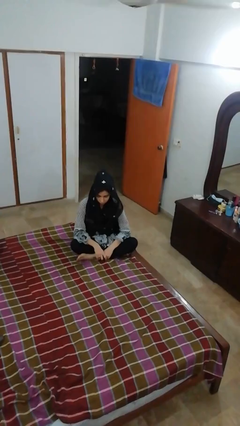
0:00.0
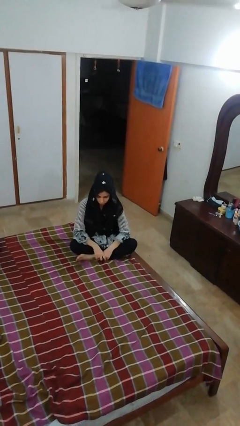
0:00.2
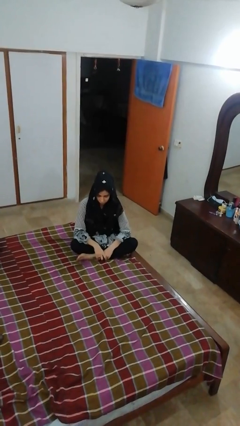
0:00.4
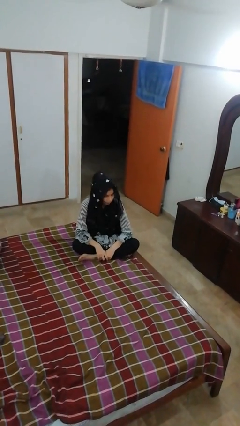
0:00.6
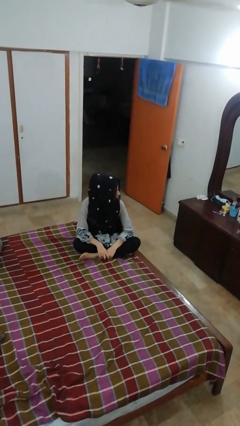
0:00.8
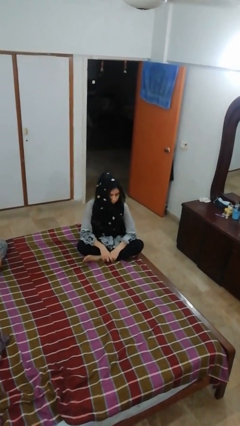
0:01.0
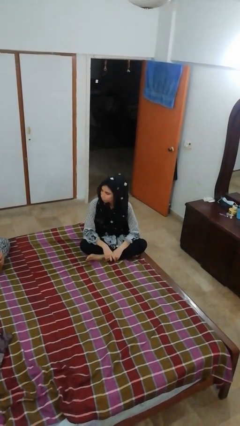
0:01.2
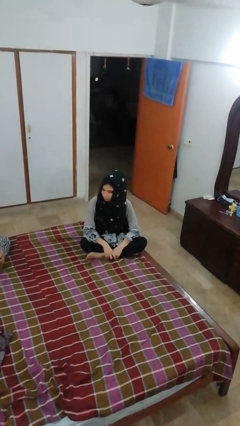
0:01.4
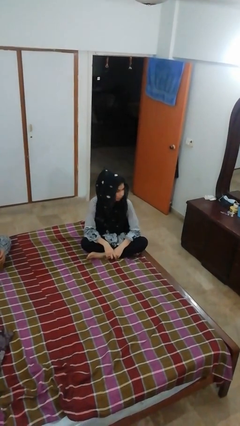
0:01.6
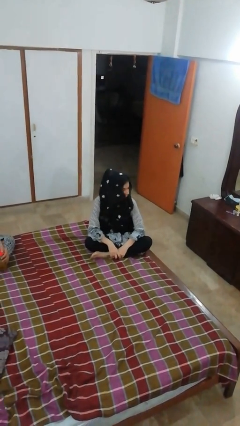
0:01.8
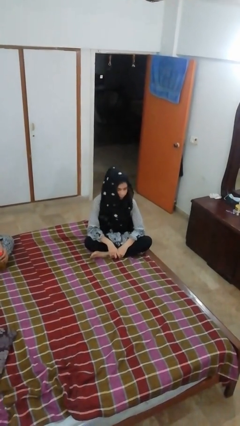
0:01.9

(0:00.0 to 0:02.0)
person shakes head

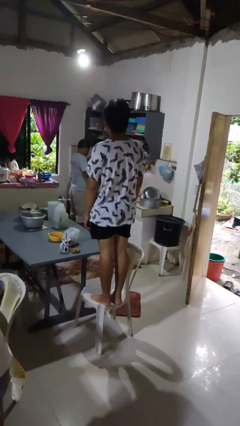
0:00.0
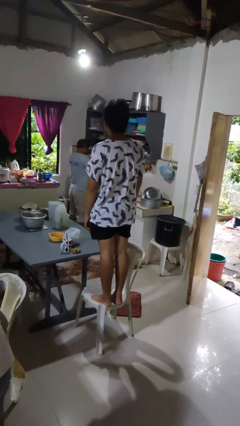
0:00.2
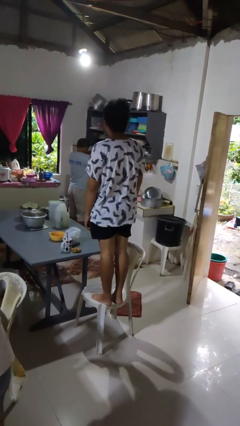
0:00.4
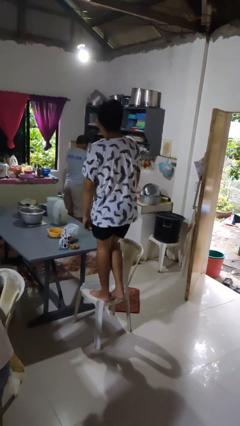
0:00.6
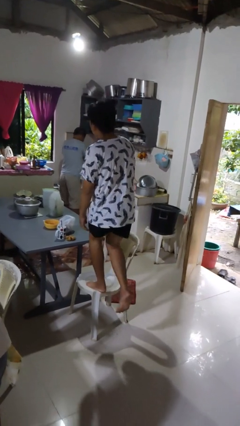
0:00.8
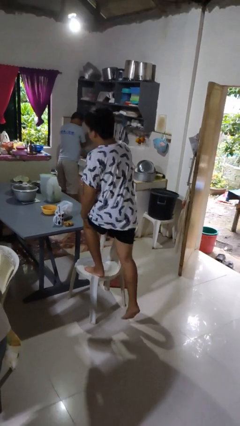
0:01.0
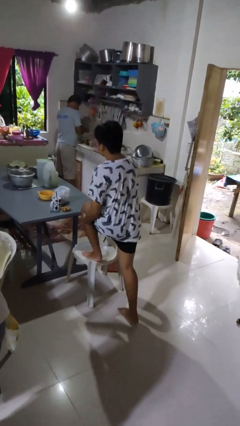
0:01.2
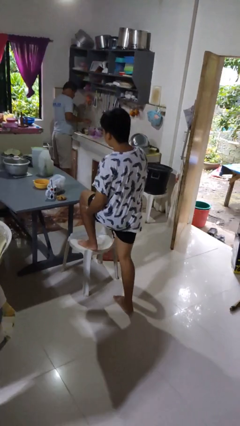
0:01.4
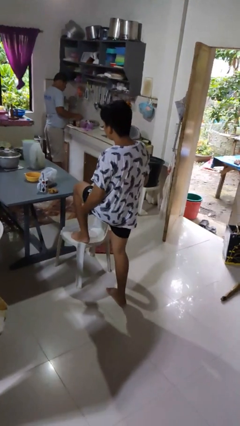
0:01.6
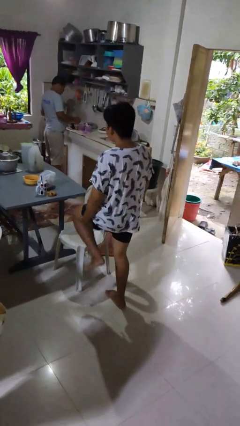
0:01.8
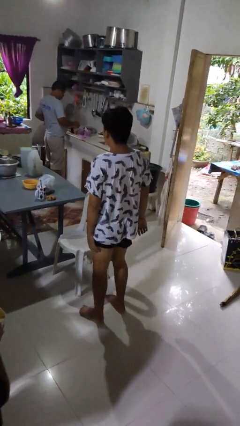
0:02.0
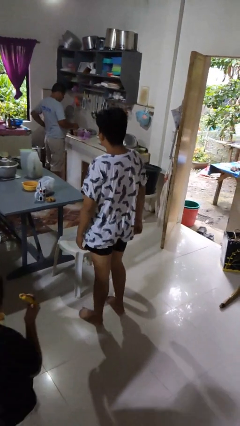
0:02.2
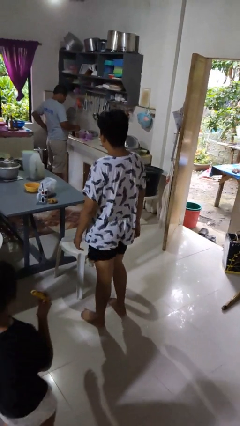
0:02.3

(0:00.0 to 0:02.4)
person climbs off chair

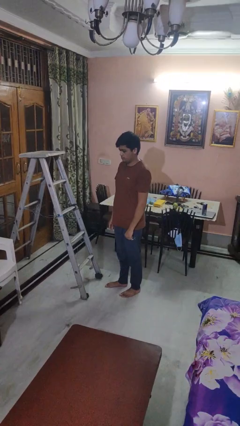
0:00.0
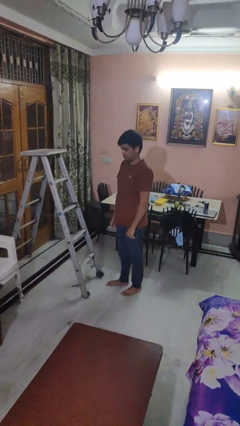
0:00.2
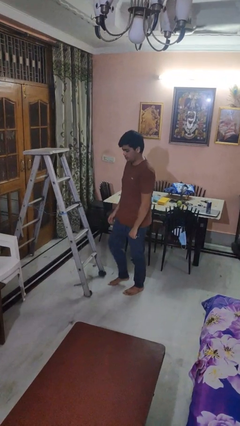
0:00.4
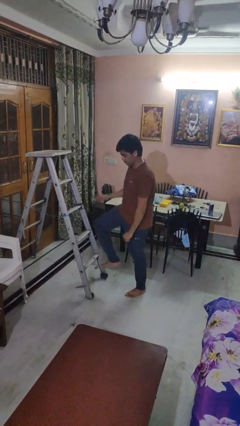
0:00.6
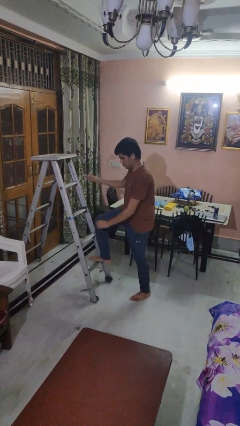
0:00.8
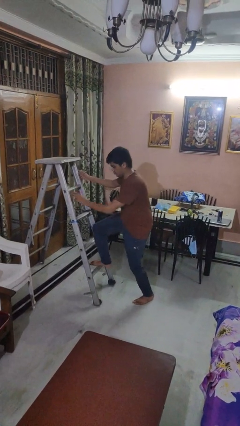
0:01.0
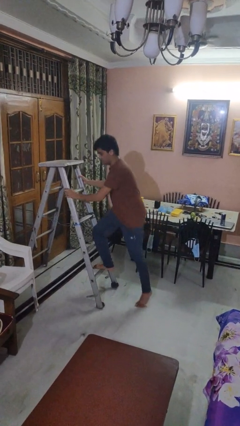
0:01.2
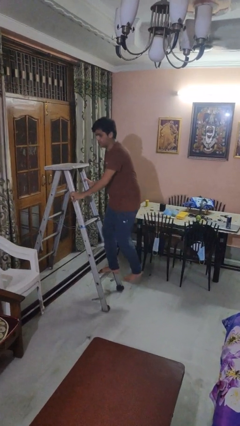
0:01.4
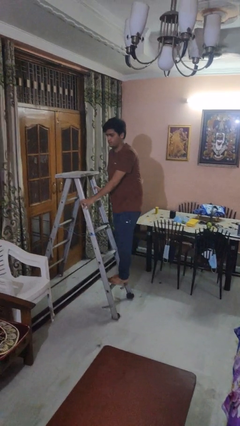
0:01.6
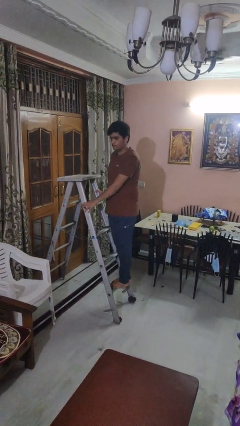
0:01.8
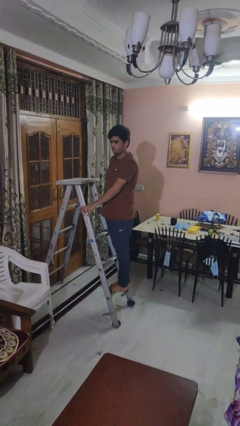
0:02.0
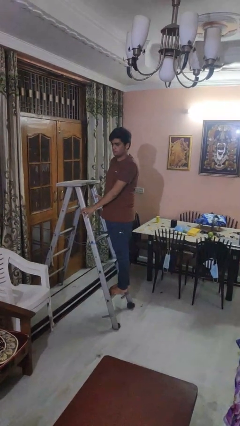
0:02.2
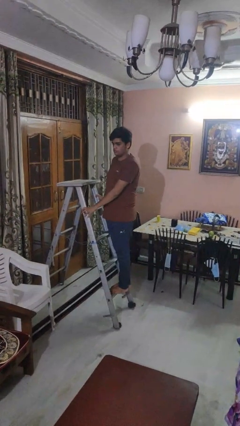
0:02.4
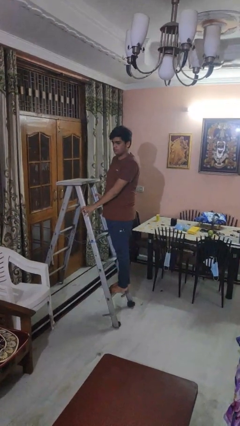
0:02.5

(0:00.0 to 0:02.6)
person climbs up ladder

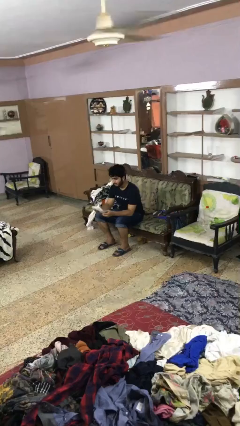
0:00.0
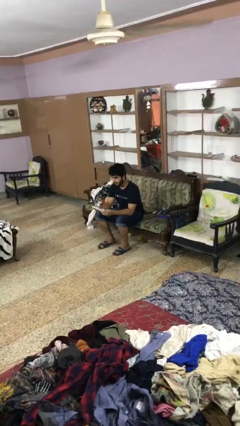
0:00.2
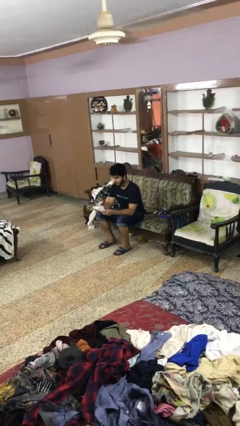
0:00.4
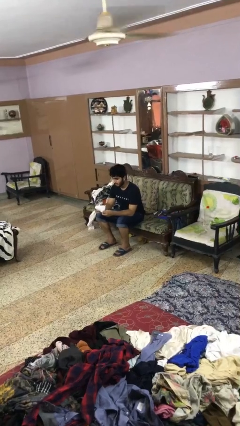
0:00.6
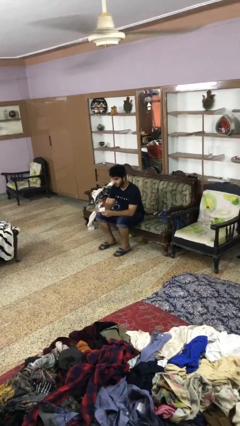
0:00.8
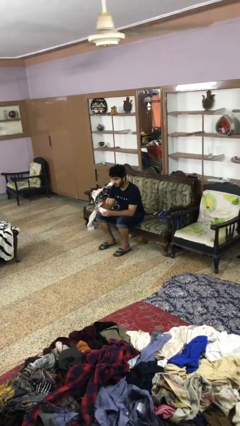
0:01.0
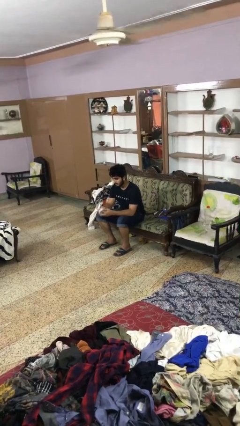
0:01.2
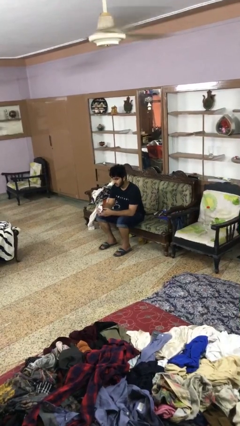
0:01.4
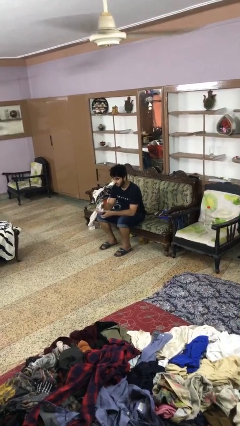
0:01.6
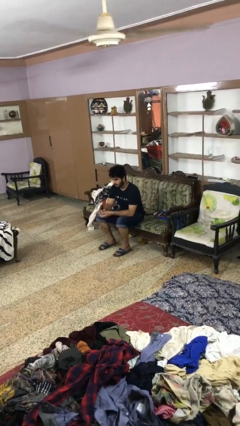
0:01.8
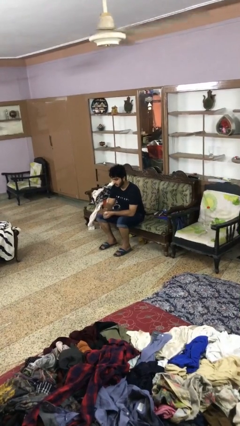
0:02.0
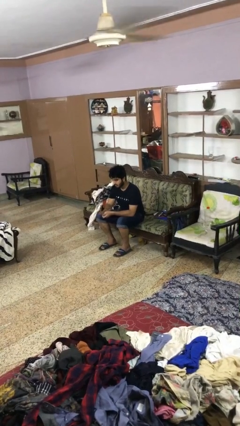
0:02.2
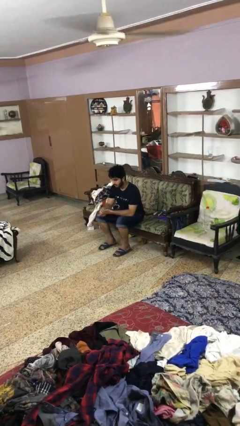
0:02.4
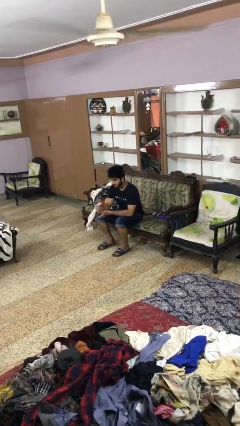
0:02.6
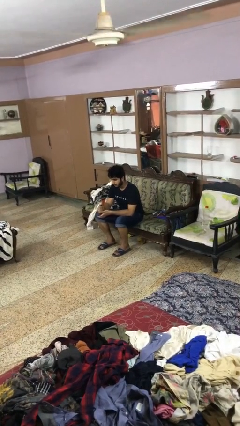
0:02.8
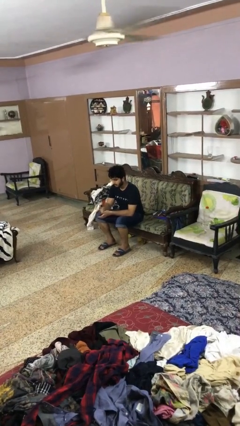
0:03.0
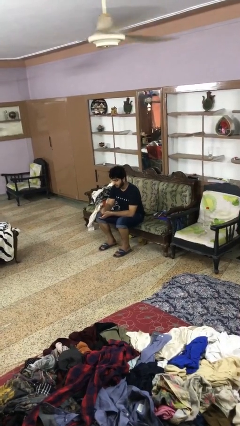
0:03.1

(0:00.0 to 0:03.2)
person crumples paper

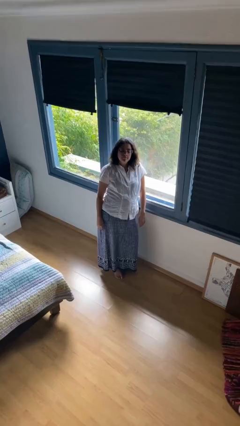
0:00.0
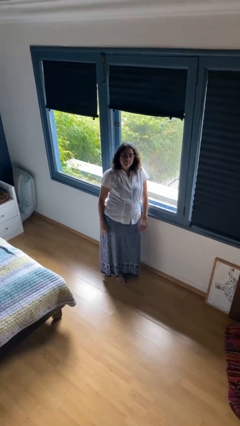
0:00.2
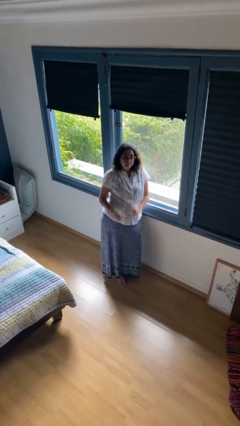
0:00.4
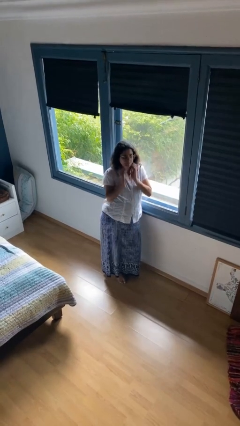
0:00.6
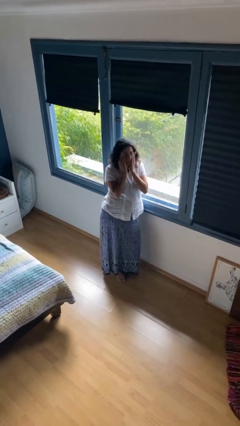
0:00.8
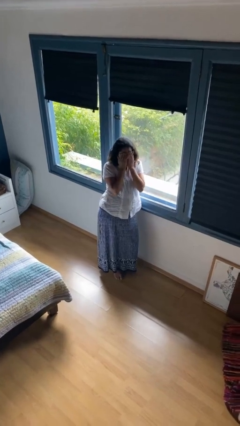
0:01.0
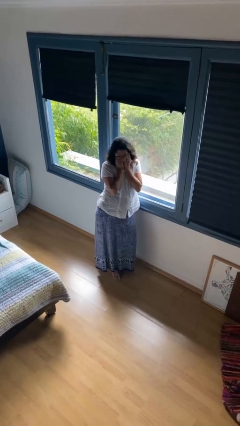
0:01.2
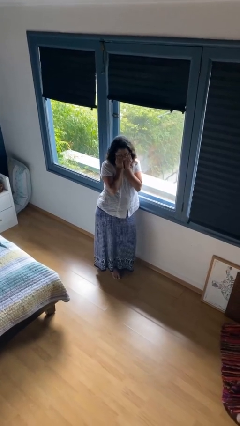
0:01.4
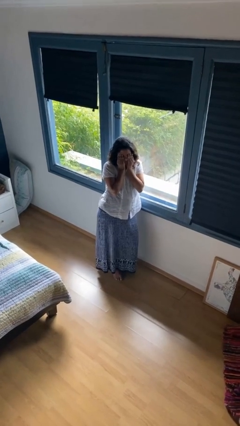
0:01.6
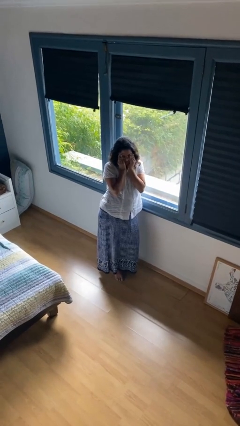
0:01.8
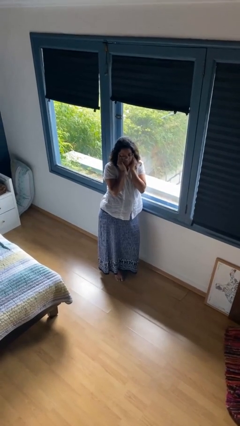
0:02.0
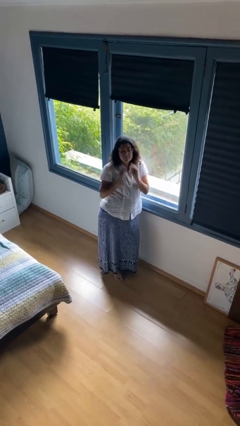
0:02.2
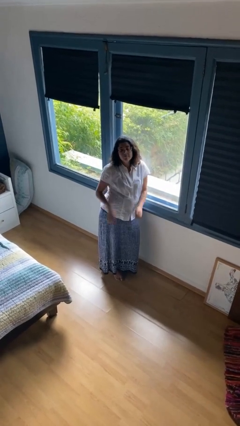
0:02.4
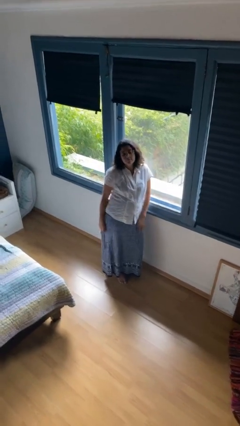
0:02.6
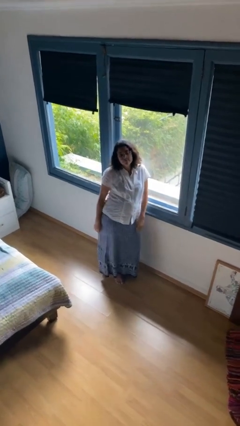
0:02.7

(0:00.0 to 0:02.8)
person rubs eyes

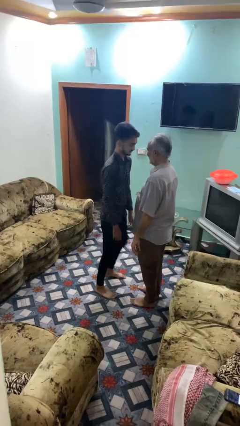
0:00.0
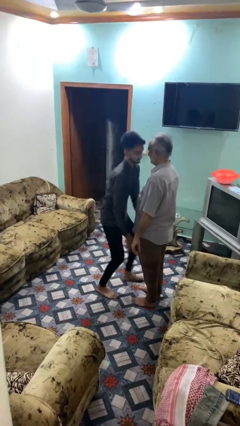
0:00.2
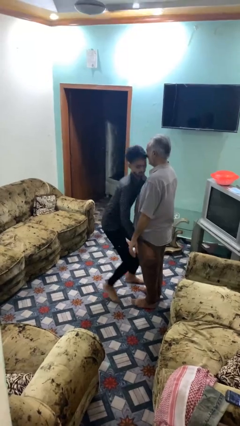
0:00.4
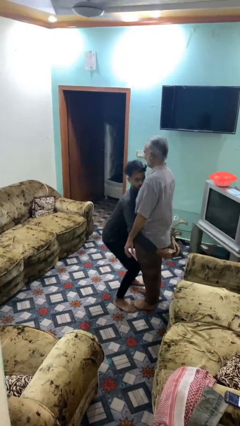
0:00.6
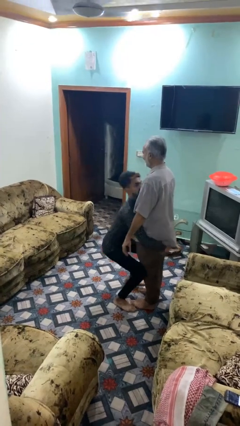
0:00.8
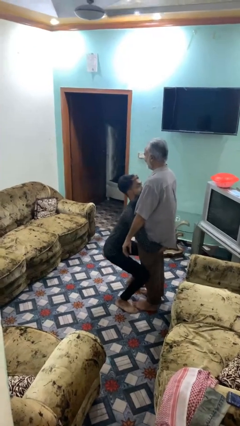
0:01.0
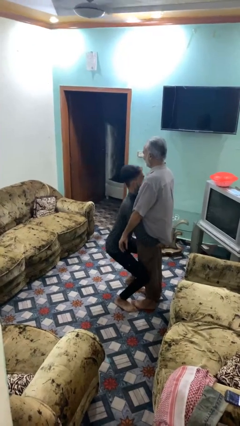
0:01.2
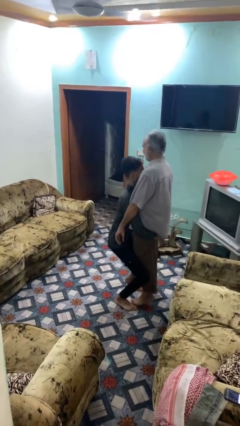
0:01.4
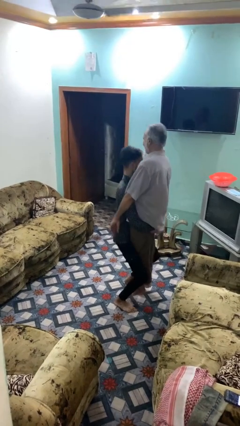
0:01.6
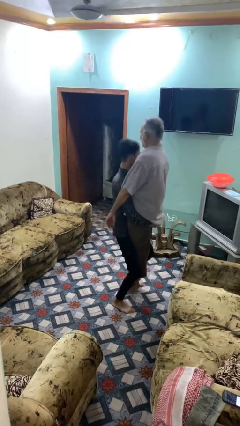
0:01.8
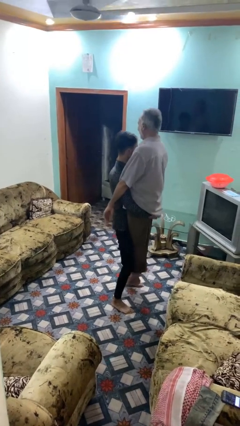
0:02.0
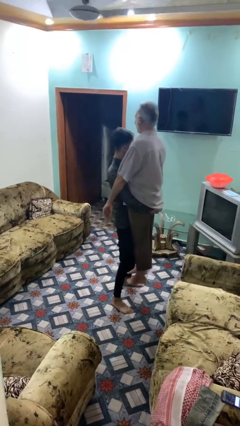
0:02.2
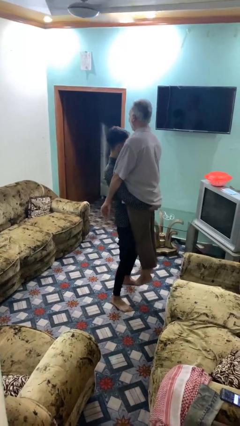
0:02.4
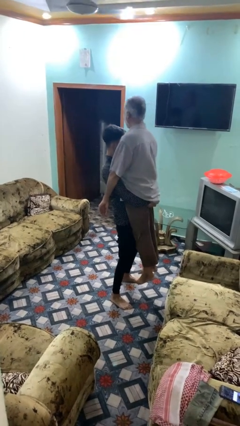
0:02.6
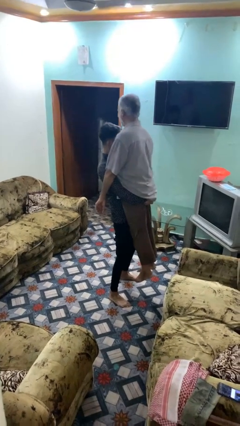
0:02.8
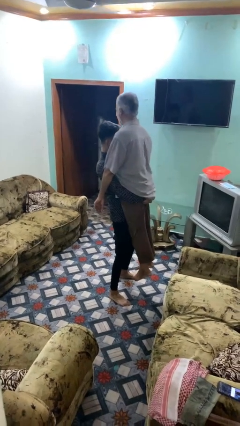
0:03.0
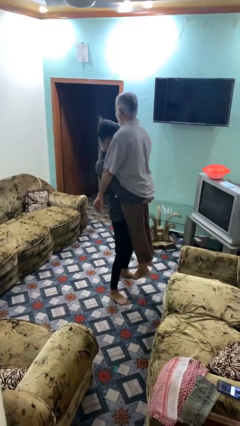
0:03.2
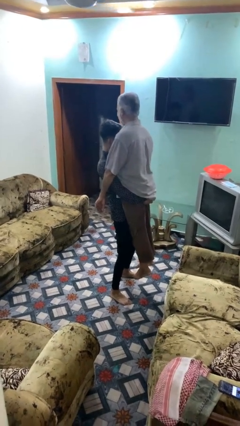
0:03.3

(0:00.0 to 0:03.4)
person picks up person

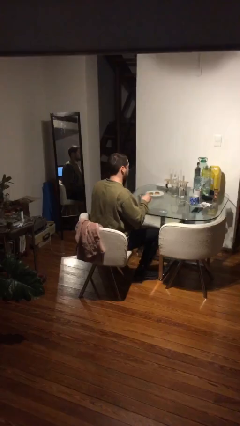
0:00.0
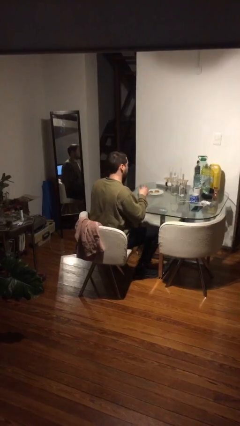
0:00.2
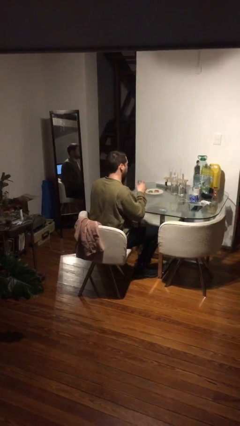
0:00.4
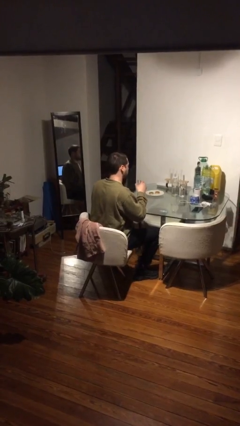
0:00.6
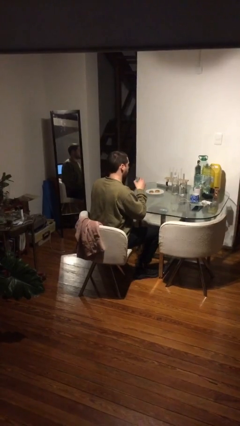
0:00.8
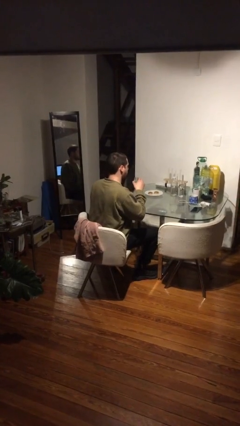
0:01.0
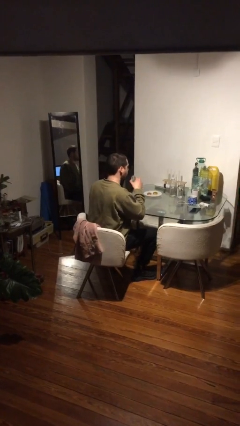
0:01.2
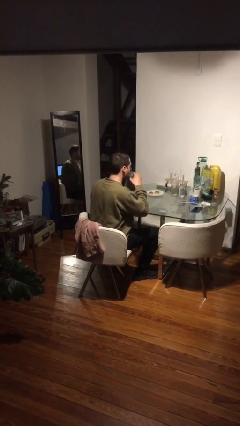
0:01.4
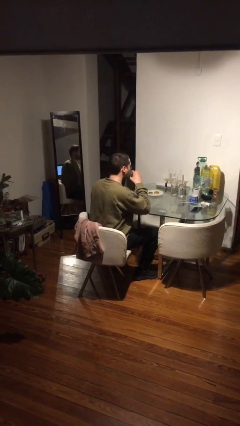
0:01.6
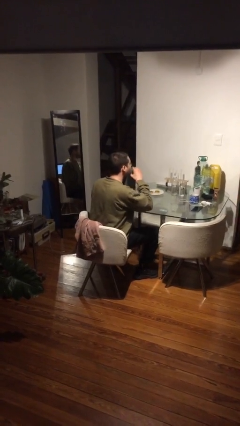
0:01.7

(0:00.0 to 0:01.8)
person picks up object from table
